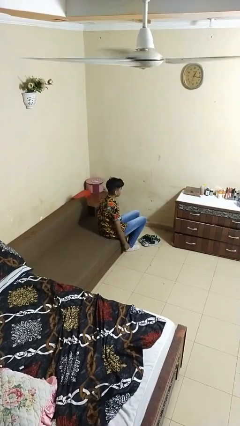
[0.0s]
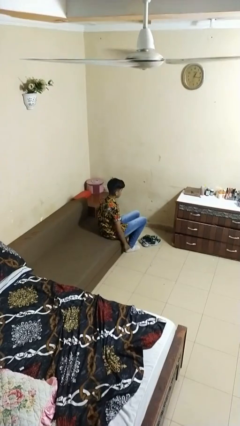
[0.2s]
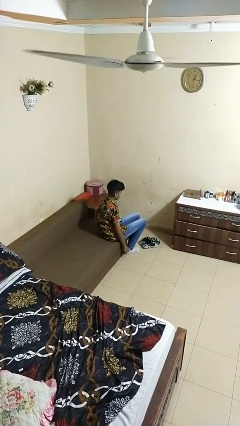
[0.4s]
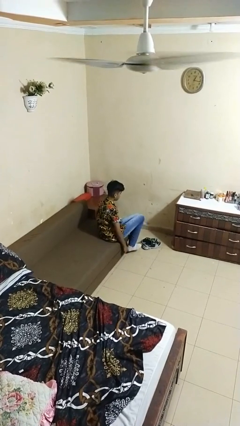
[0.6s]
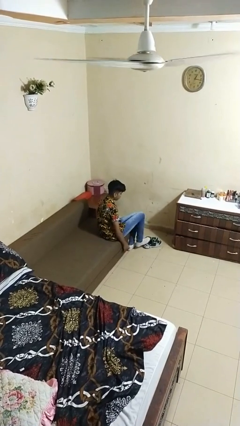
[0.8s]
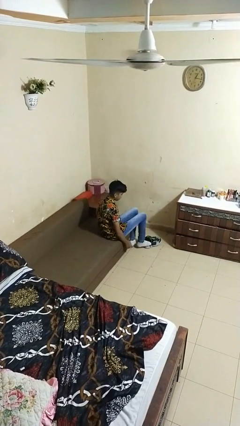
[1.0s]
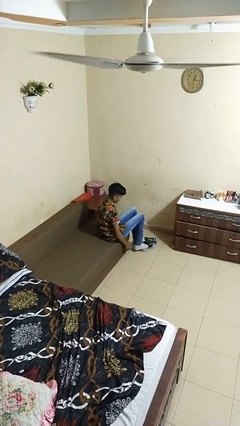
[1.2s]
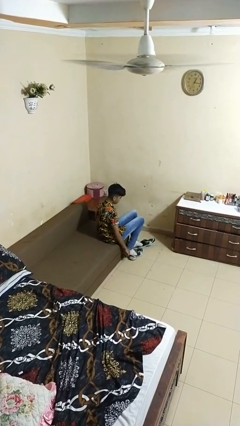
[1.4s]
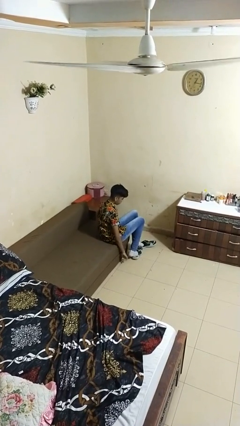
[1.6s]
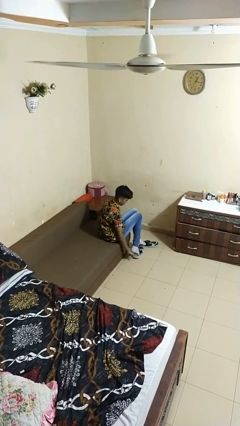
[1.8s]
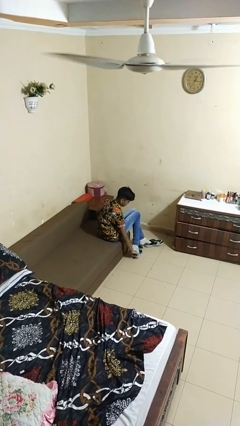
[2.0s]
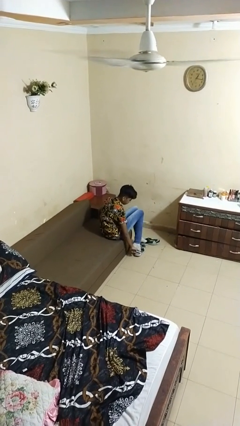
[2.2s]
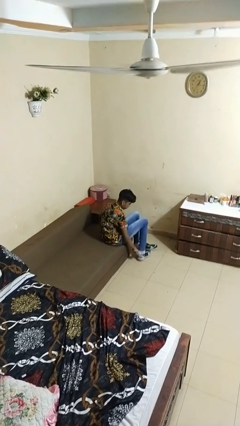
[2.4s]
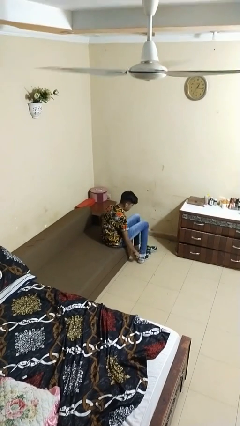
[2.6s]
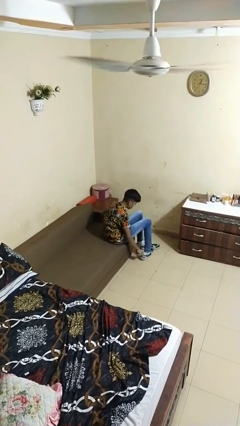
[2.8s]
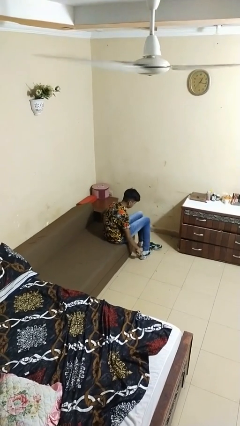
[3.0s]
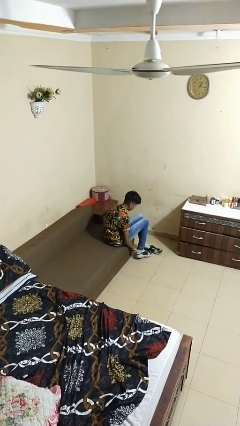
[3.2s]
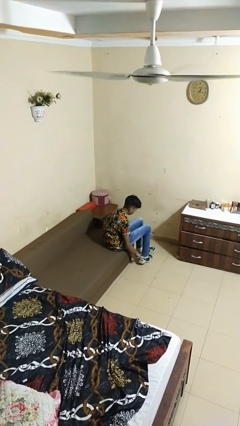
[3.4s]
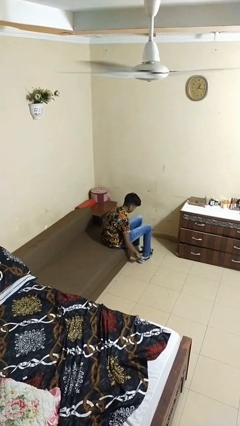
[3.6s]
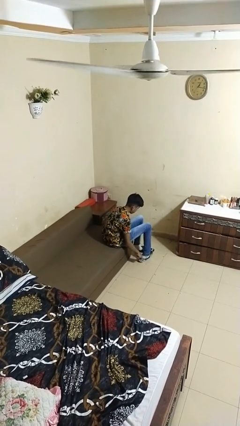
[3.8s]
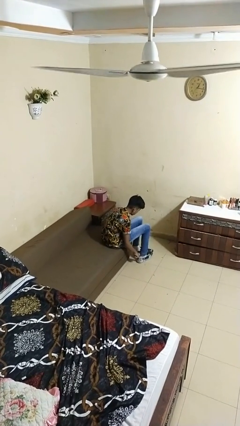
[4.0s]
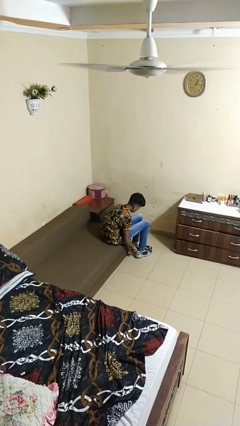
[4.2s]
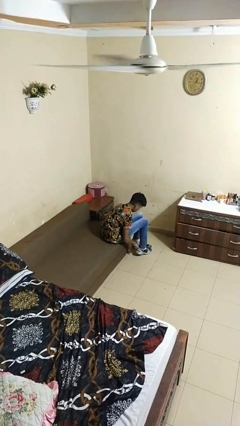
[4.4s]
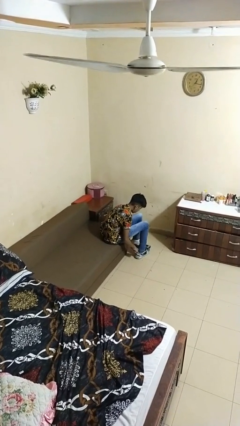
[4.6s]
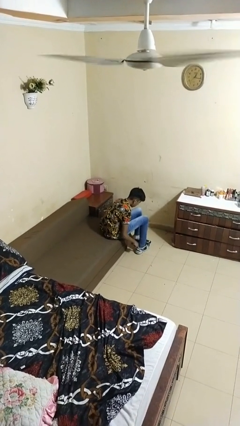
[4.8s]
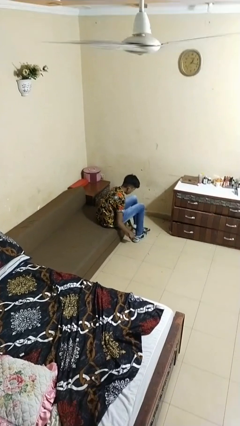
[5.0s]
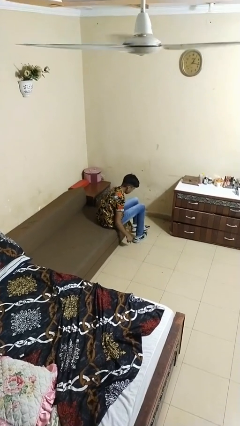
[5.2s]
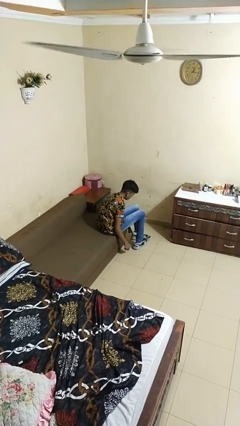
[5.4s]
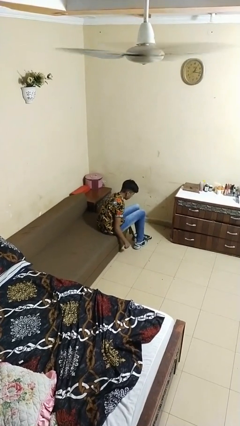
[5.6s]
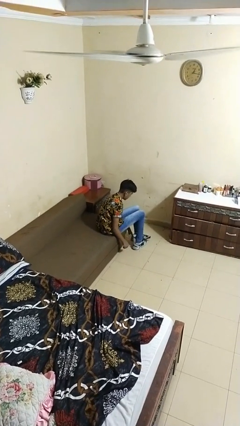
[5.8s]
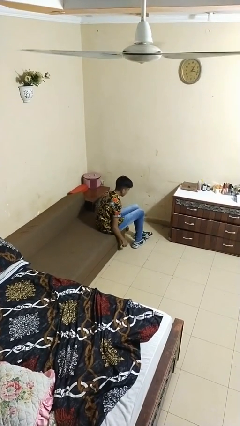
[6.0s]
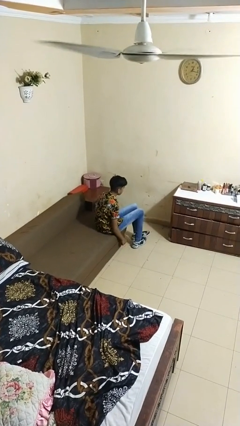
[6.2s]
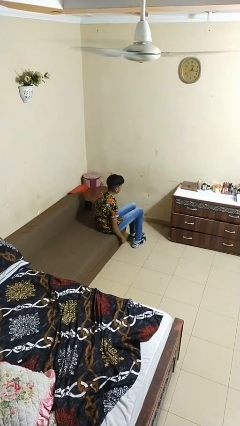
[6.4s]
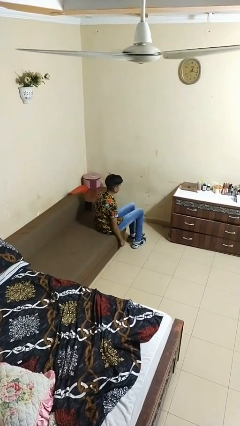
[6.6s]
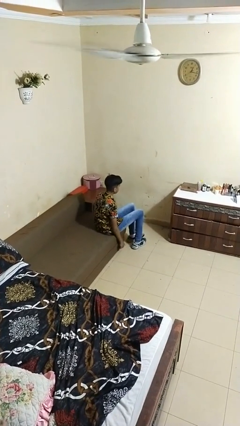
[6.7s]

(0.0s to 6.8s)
person puts on shoes

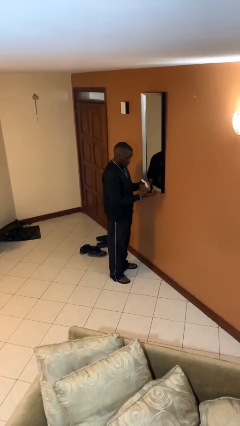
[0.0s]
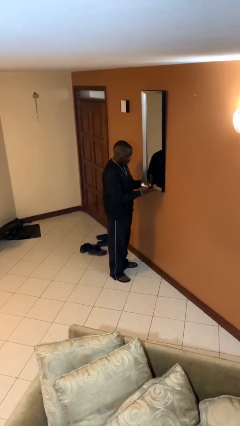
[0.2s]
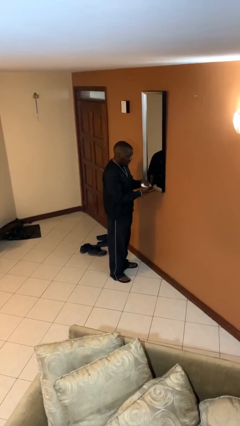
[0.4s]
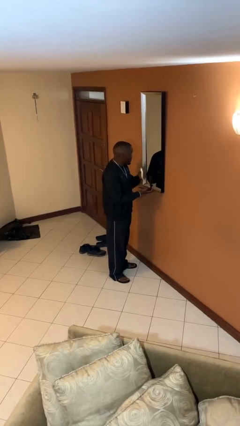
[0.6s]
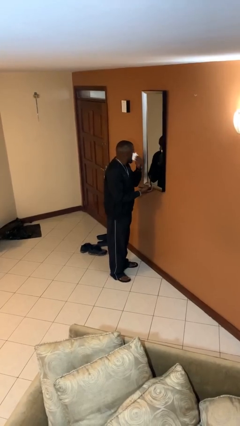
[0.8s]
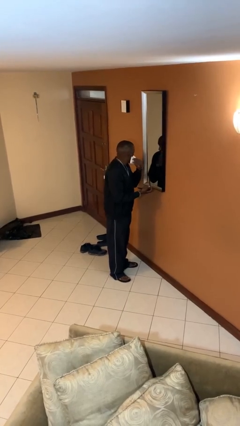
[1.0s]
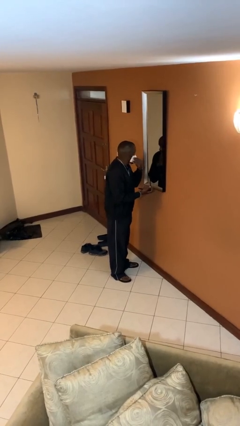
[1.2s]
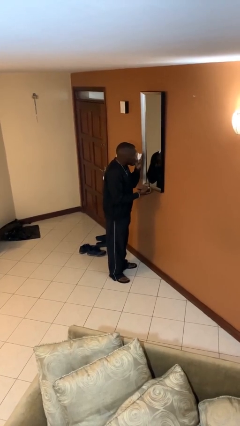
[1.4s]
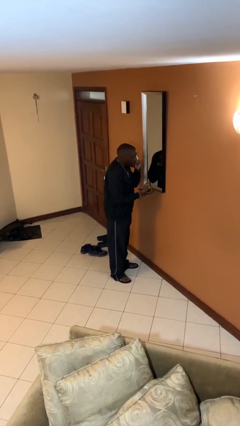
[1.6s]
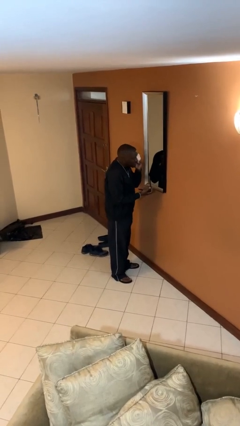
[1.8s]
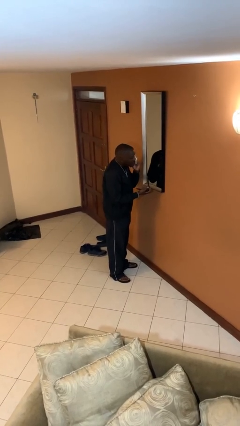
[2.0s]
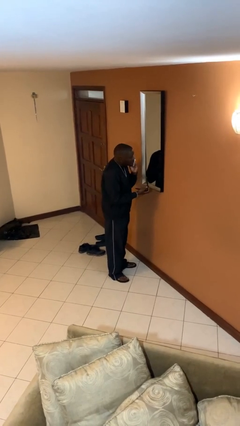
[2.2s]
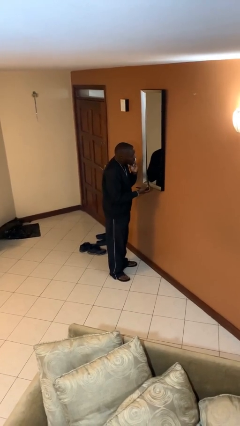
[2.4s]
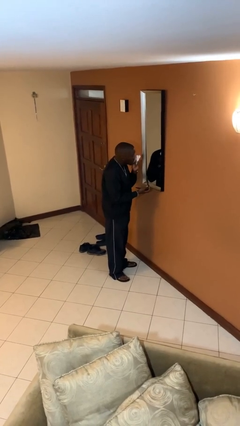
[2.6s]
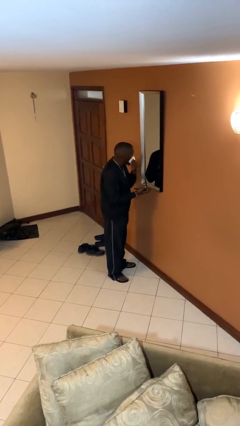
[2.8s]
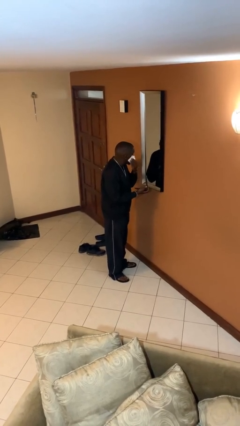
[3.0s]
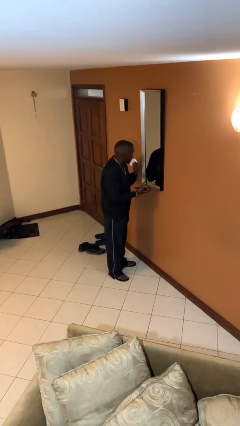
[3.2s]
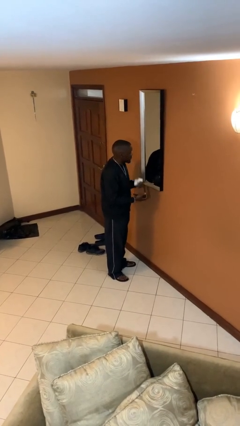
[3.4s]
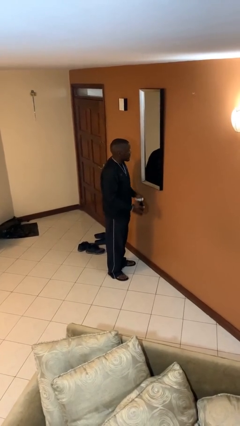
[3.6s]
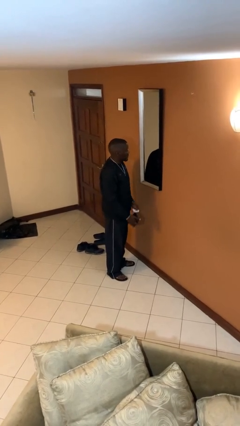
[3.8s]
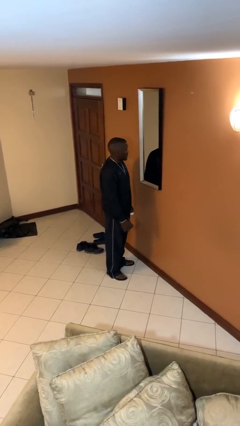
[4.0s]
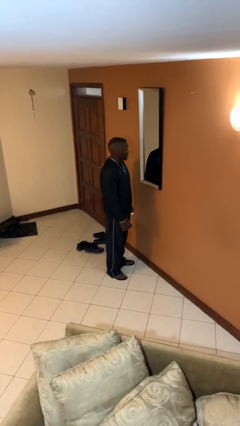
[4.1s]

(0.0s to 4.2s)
person applies foundation makeup

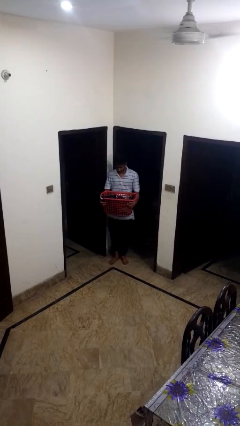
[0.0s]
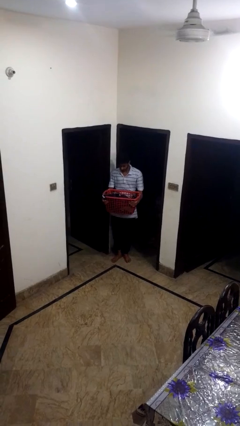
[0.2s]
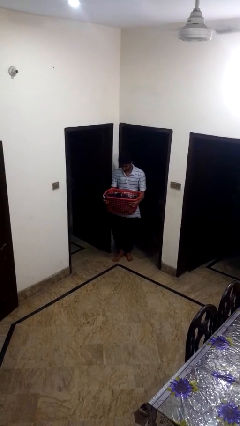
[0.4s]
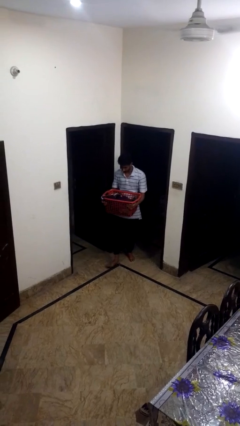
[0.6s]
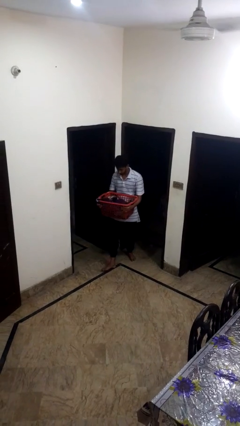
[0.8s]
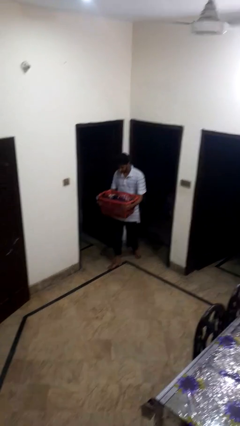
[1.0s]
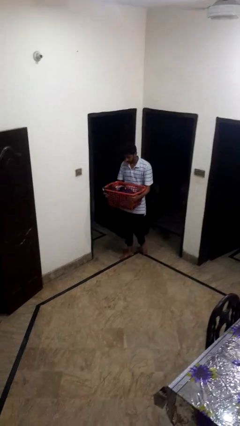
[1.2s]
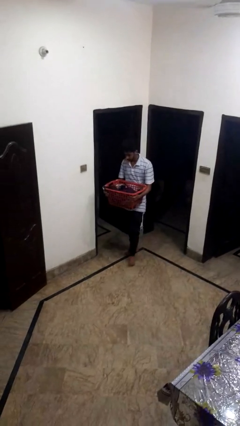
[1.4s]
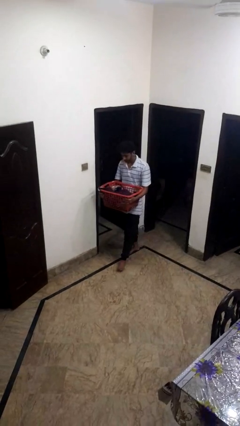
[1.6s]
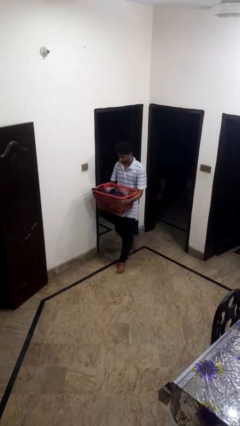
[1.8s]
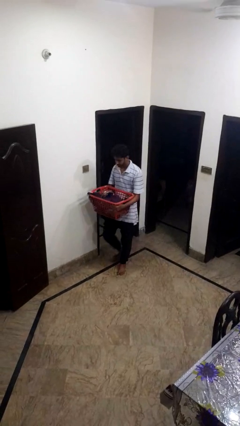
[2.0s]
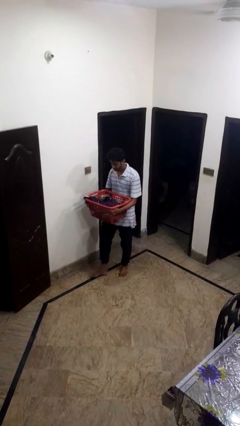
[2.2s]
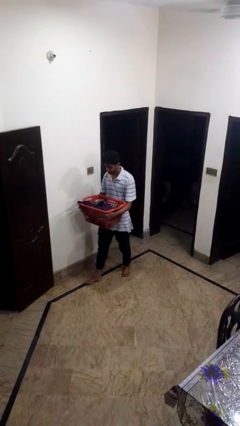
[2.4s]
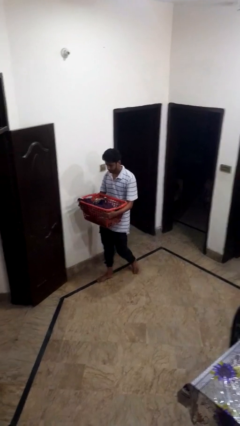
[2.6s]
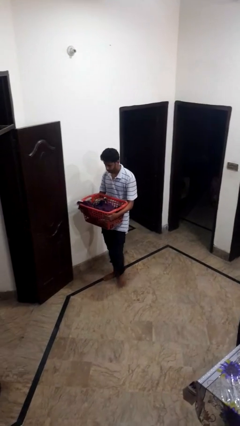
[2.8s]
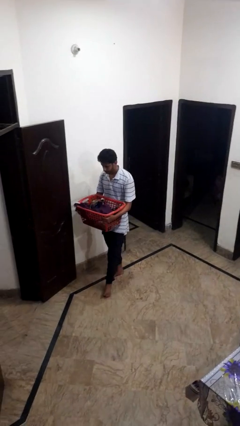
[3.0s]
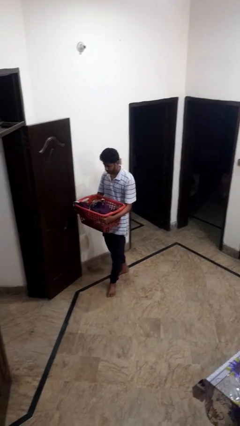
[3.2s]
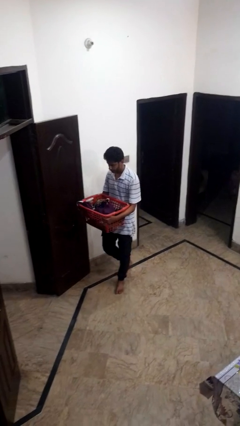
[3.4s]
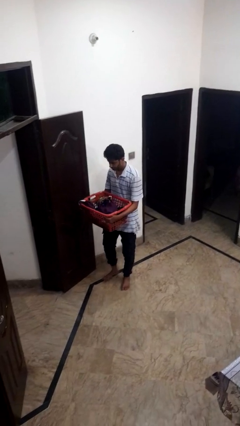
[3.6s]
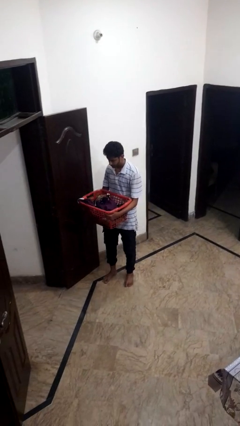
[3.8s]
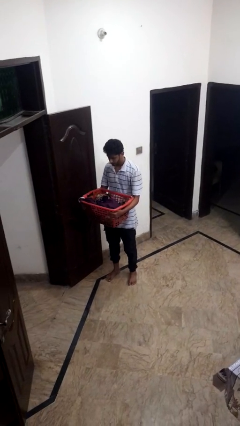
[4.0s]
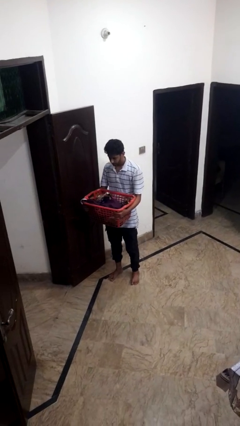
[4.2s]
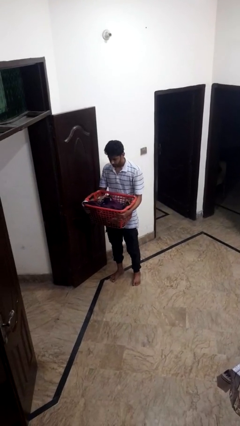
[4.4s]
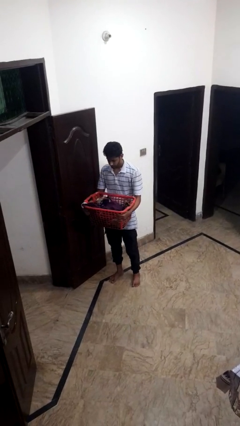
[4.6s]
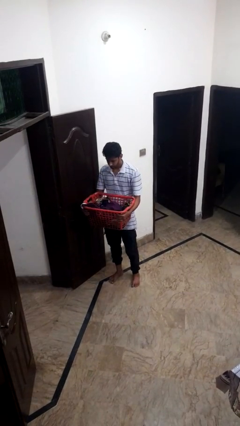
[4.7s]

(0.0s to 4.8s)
person carries laundry basket

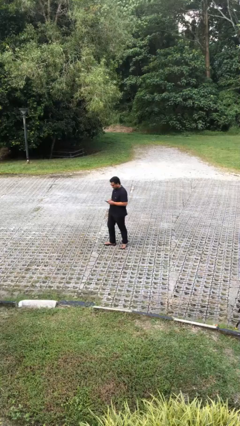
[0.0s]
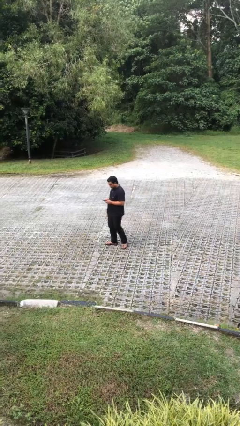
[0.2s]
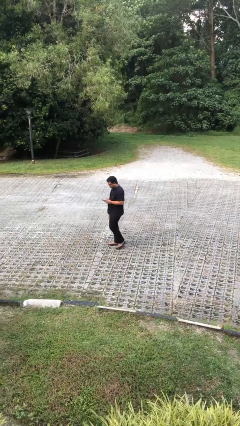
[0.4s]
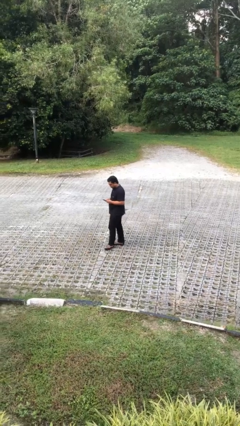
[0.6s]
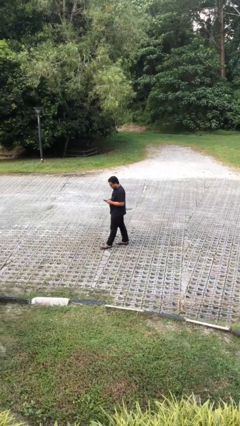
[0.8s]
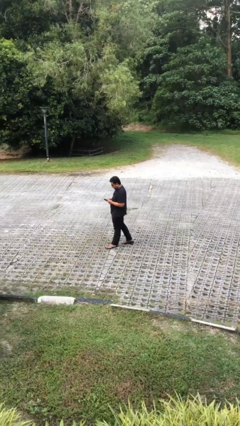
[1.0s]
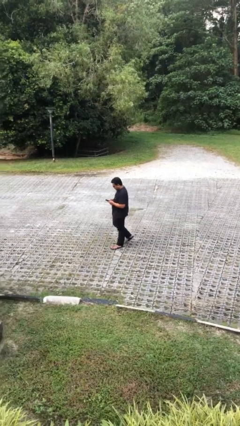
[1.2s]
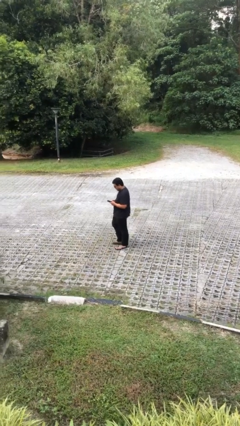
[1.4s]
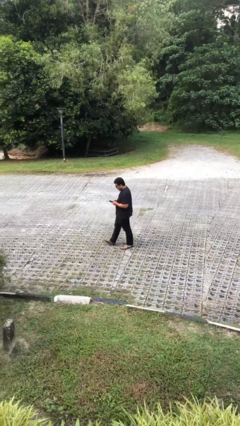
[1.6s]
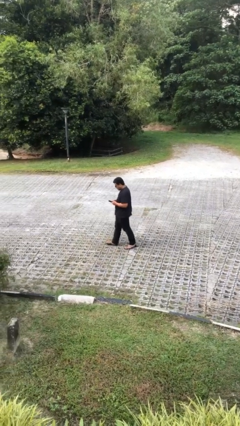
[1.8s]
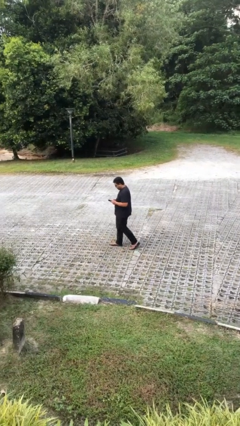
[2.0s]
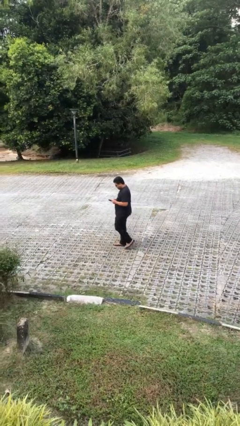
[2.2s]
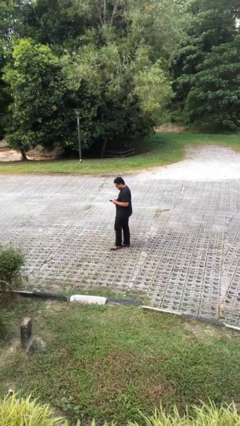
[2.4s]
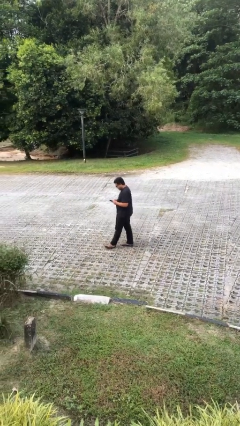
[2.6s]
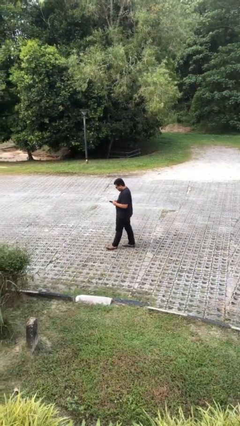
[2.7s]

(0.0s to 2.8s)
person texts on phone
